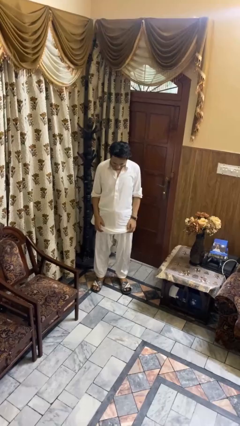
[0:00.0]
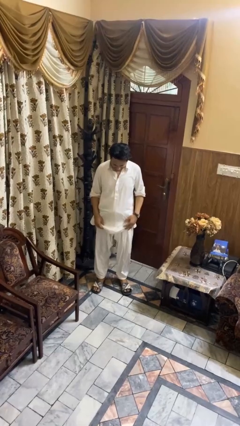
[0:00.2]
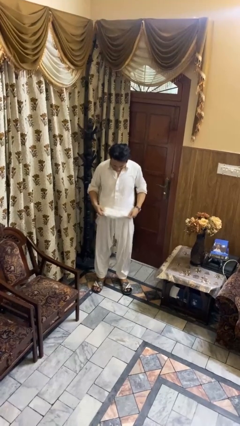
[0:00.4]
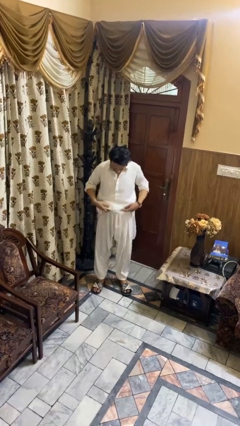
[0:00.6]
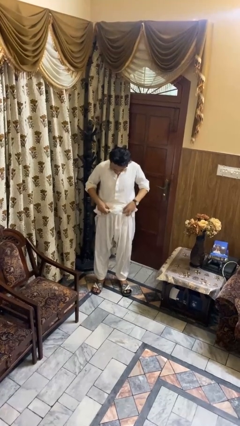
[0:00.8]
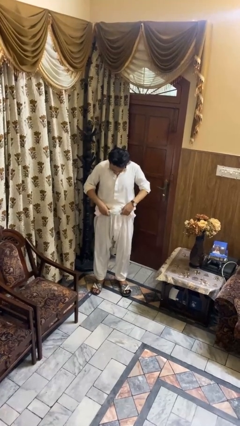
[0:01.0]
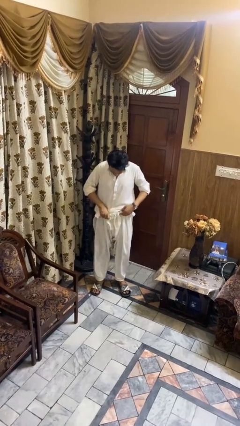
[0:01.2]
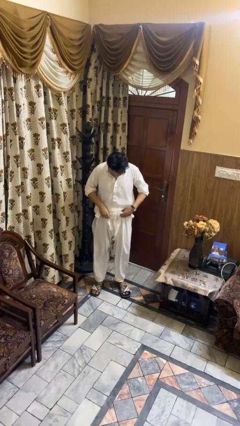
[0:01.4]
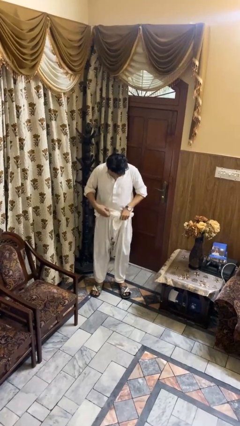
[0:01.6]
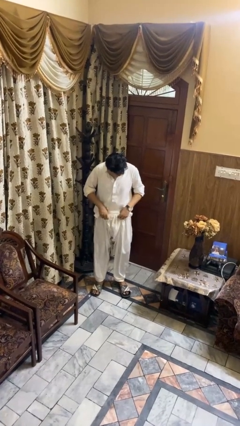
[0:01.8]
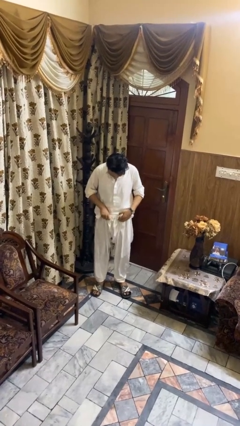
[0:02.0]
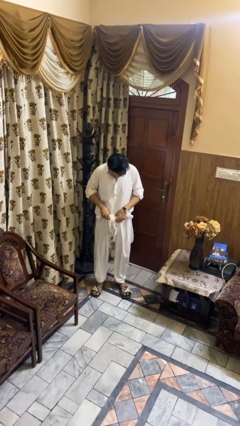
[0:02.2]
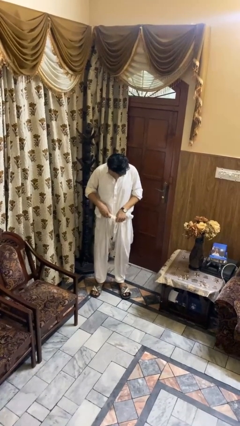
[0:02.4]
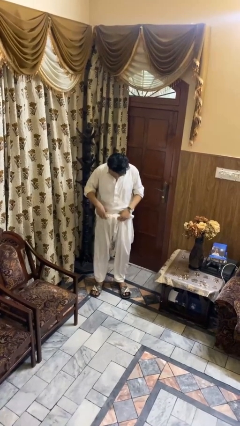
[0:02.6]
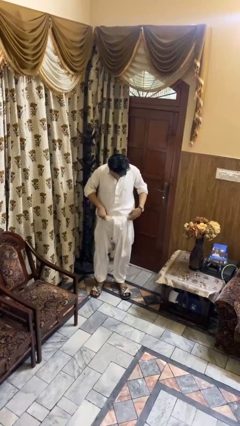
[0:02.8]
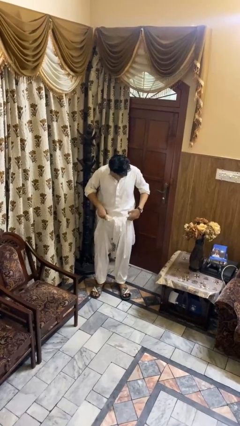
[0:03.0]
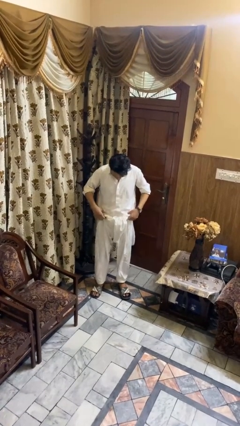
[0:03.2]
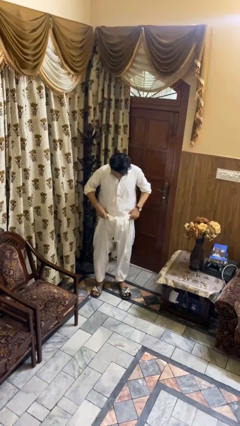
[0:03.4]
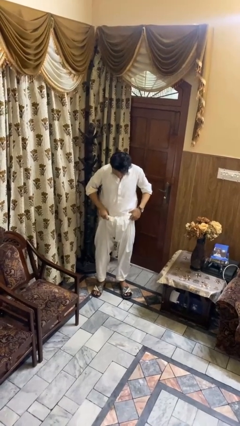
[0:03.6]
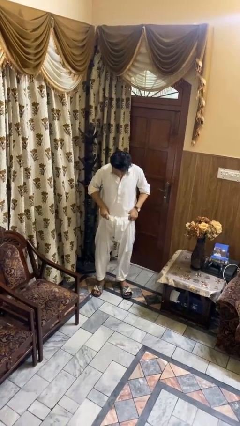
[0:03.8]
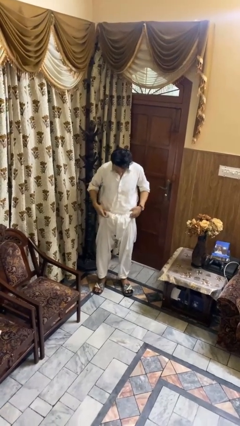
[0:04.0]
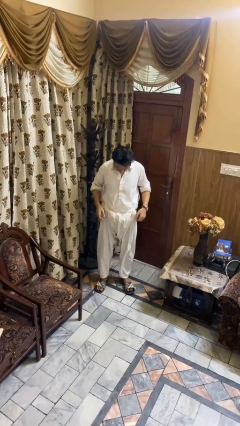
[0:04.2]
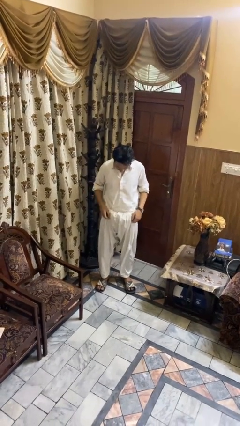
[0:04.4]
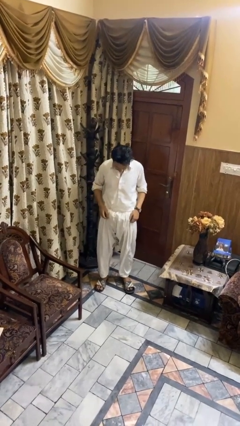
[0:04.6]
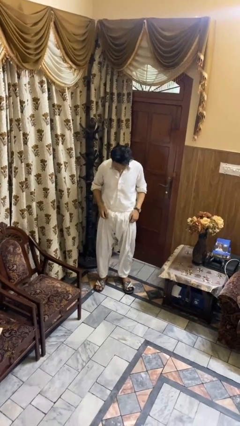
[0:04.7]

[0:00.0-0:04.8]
person tucks in shirt

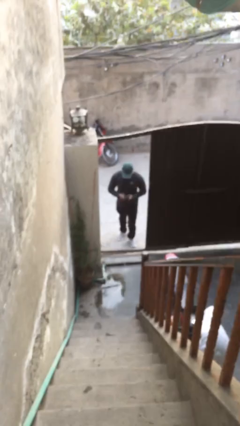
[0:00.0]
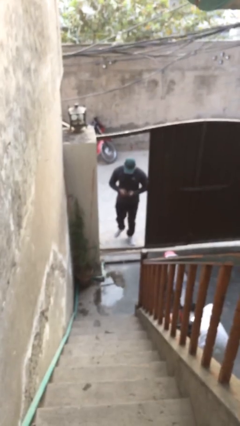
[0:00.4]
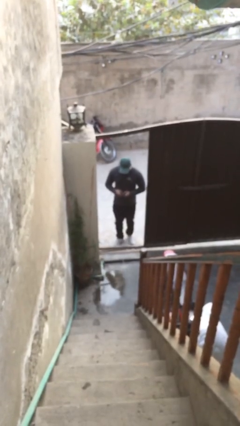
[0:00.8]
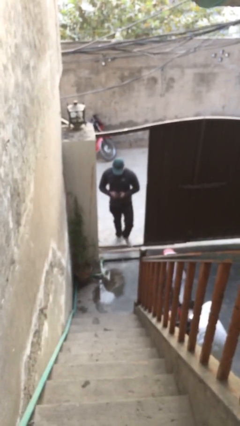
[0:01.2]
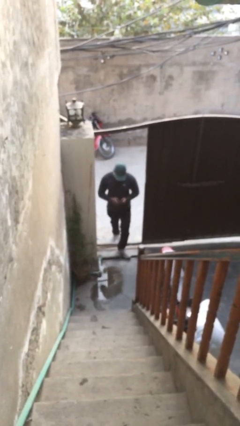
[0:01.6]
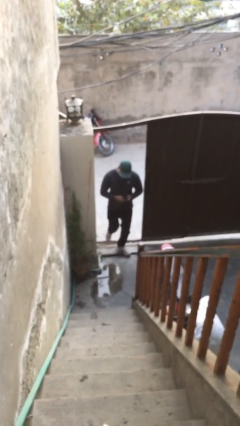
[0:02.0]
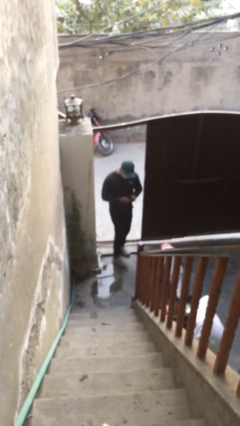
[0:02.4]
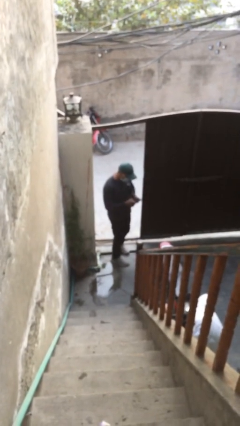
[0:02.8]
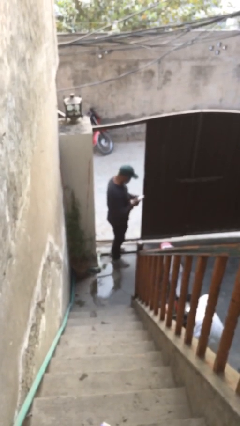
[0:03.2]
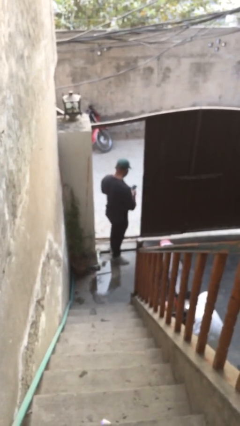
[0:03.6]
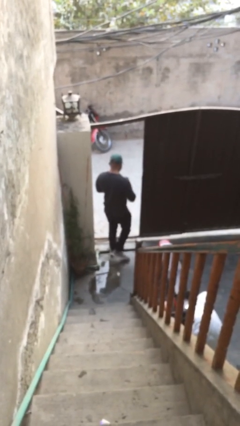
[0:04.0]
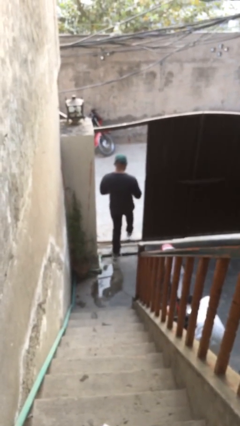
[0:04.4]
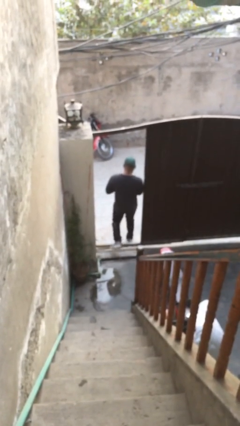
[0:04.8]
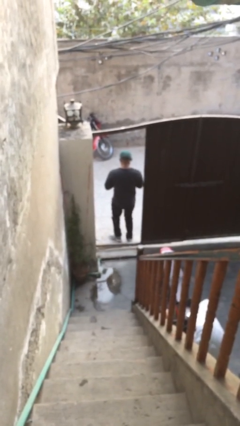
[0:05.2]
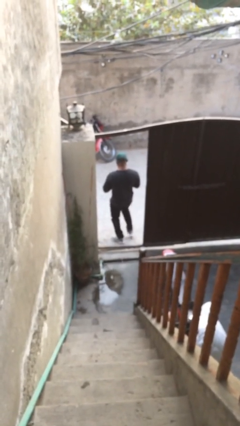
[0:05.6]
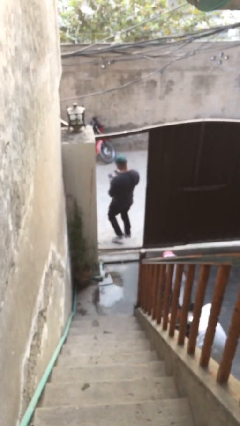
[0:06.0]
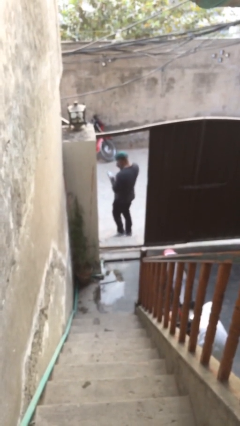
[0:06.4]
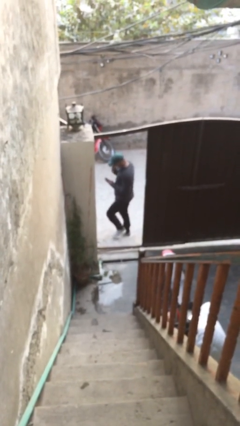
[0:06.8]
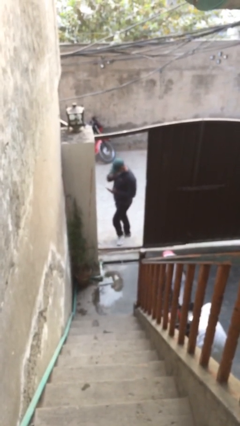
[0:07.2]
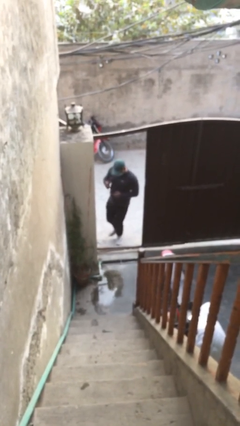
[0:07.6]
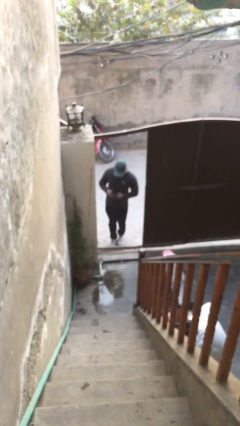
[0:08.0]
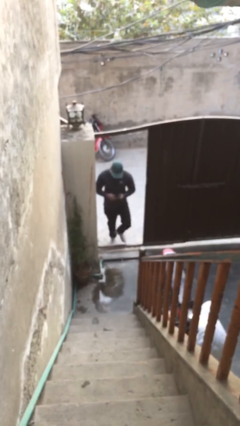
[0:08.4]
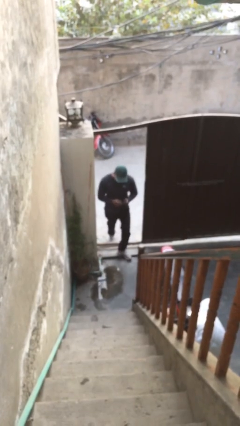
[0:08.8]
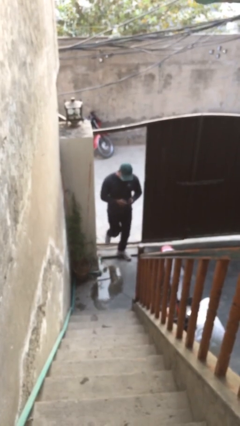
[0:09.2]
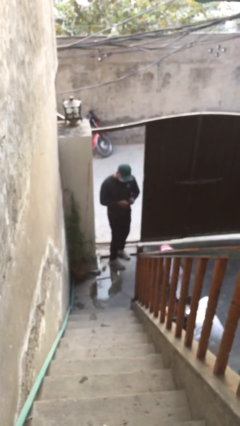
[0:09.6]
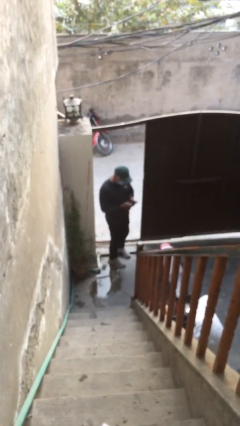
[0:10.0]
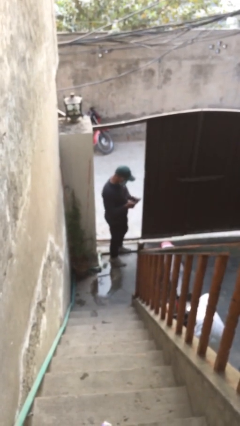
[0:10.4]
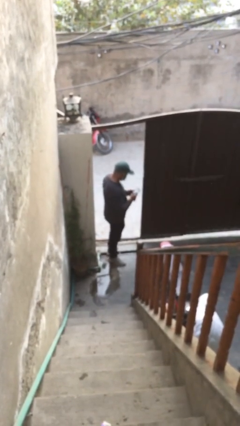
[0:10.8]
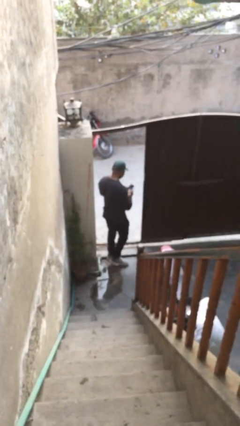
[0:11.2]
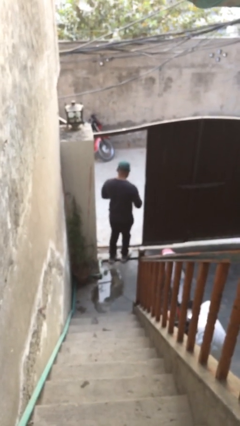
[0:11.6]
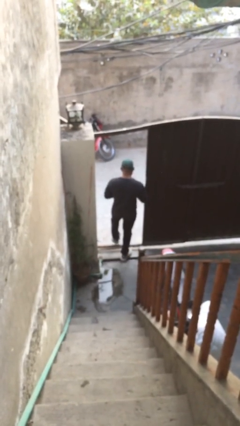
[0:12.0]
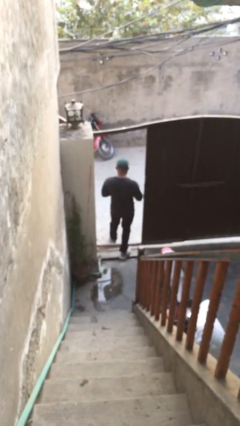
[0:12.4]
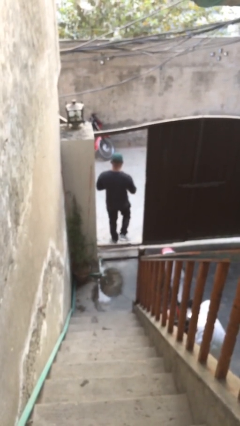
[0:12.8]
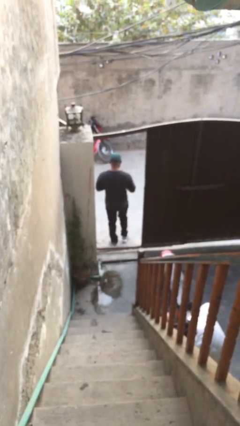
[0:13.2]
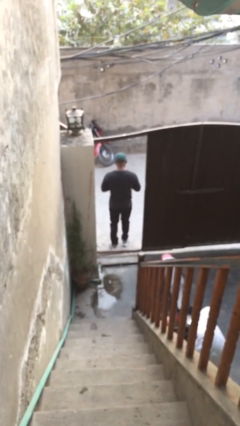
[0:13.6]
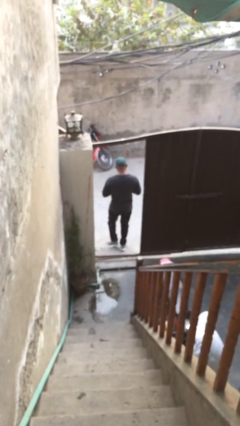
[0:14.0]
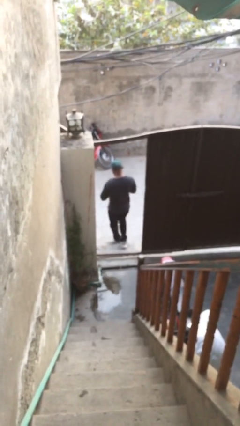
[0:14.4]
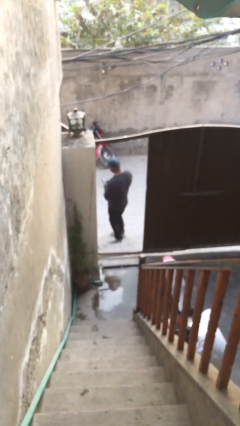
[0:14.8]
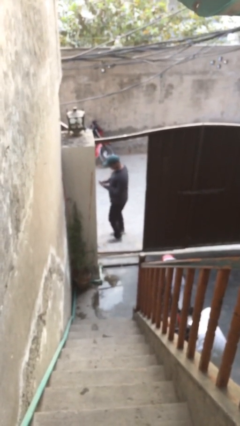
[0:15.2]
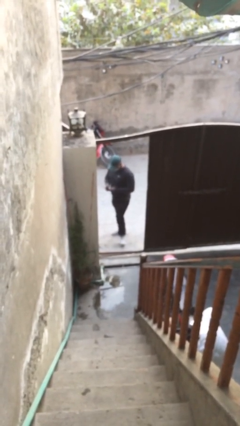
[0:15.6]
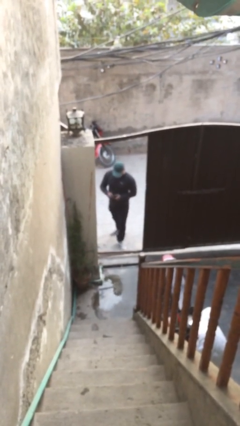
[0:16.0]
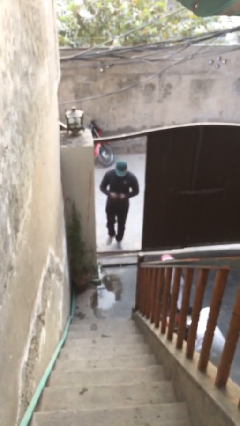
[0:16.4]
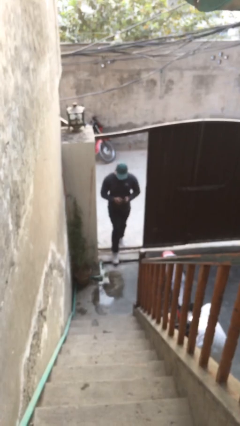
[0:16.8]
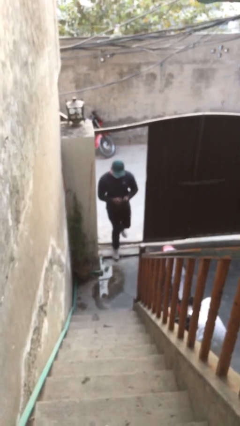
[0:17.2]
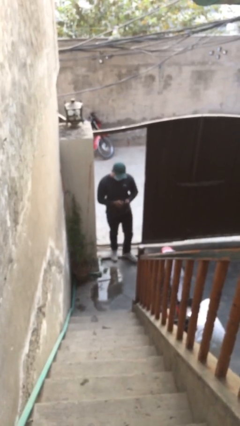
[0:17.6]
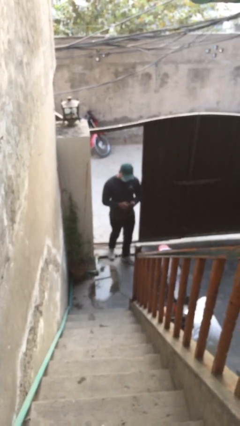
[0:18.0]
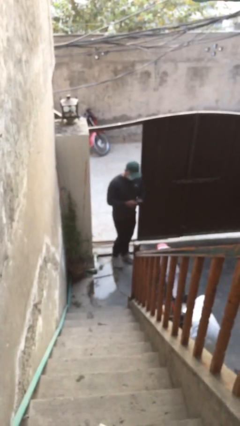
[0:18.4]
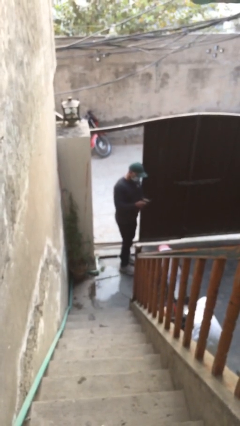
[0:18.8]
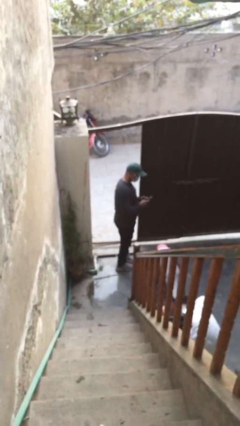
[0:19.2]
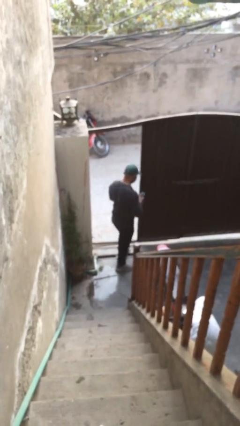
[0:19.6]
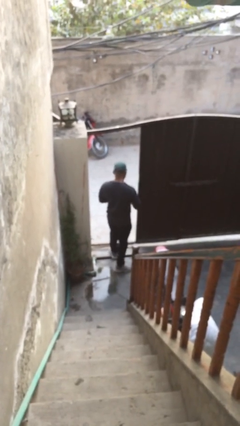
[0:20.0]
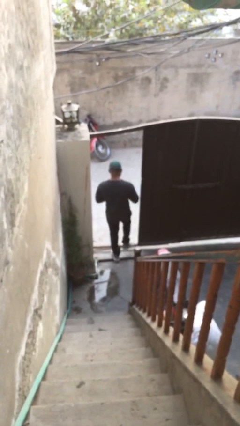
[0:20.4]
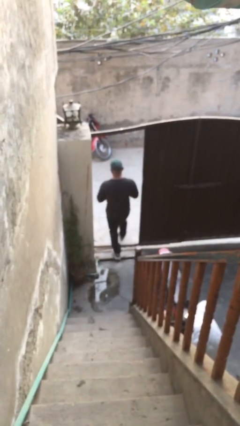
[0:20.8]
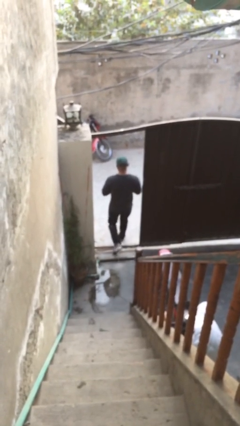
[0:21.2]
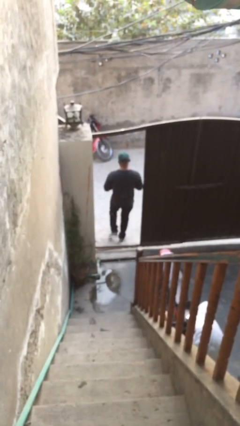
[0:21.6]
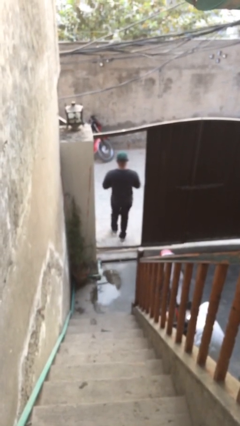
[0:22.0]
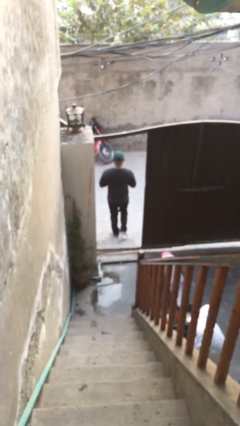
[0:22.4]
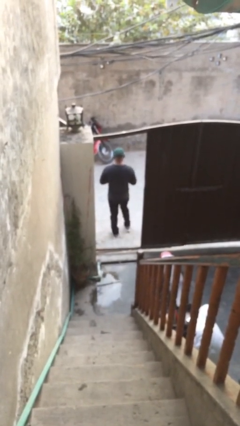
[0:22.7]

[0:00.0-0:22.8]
person texts on phone

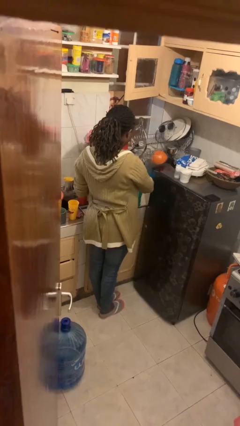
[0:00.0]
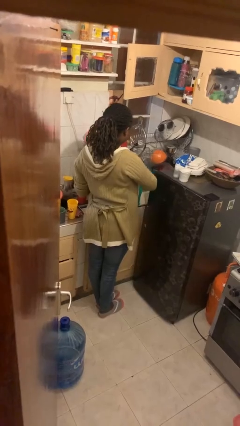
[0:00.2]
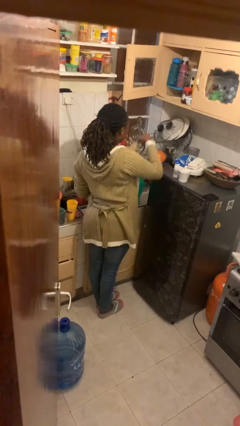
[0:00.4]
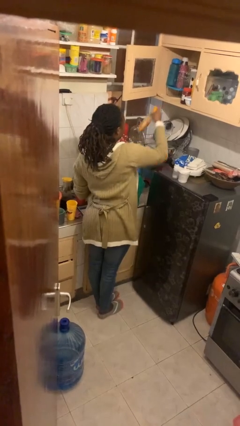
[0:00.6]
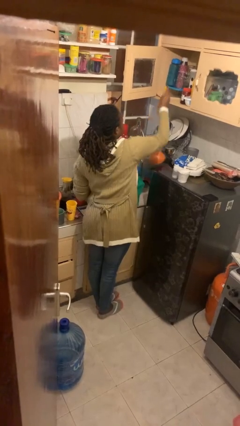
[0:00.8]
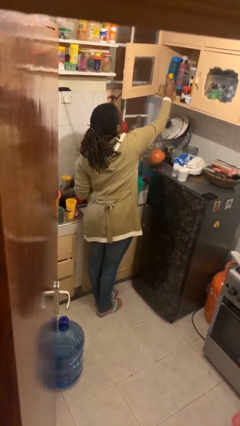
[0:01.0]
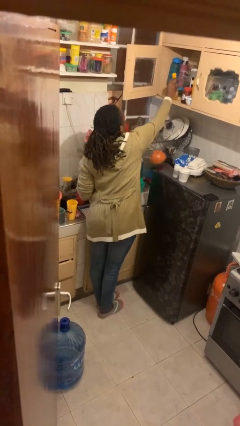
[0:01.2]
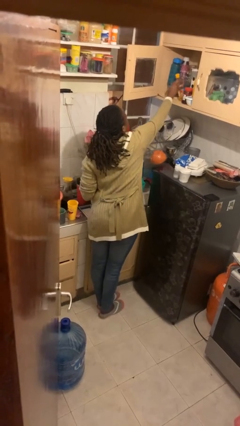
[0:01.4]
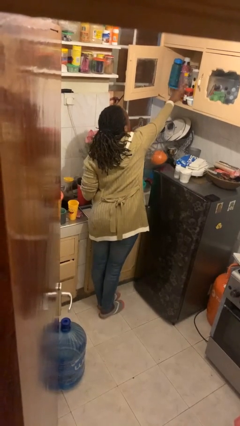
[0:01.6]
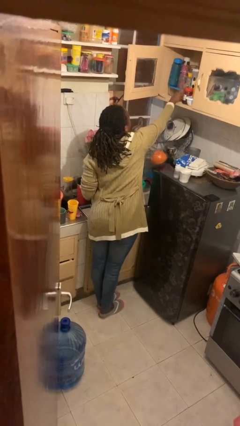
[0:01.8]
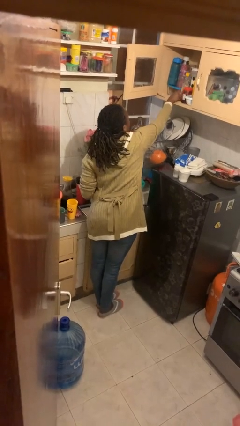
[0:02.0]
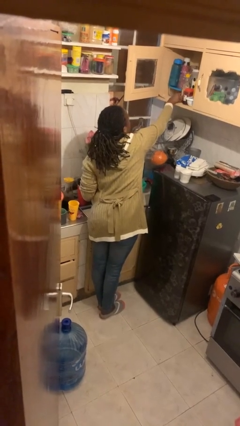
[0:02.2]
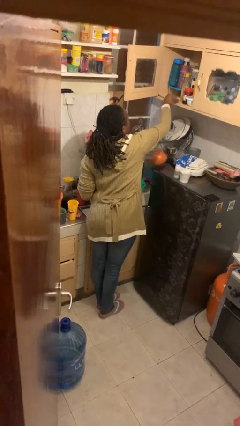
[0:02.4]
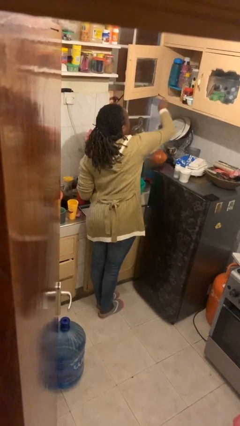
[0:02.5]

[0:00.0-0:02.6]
person loads groceries into cabinet
